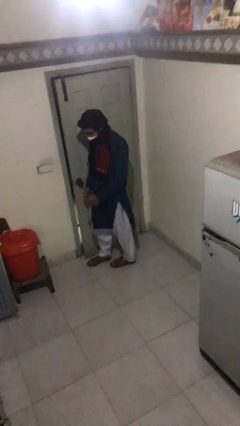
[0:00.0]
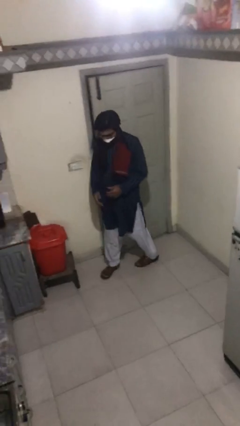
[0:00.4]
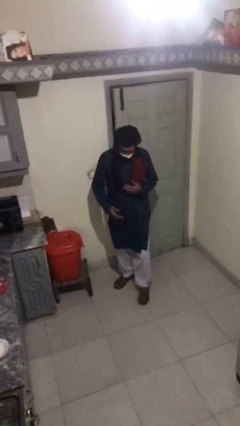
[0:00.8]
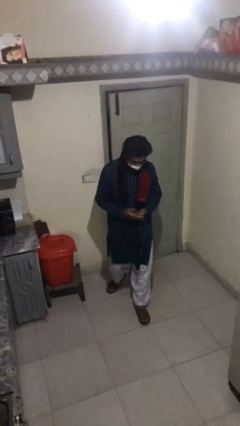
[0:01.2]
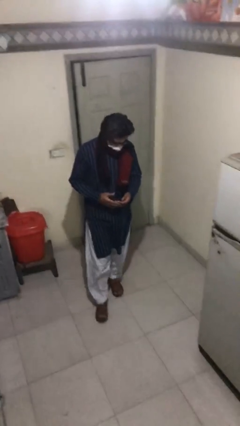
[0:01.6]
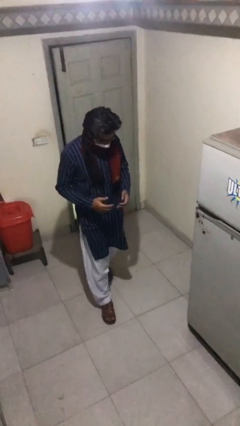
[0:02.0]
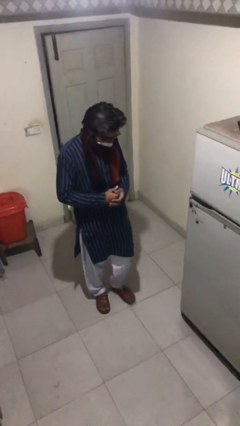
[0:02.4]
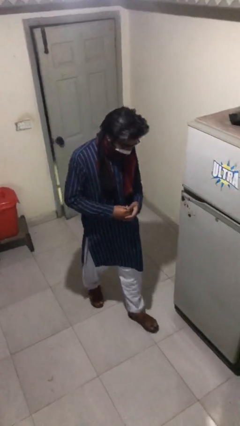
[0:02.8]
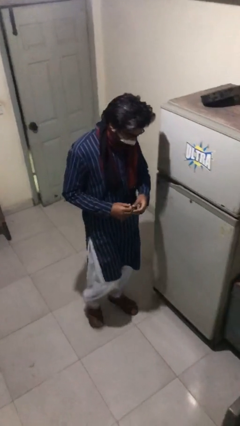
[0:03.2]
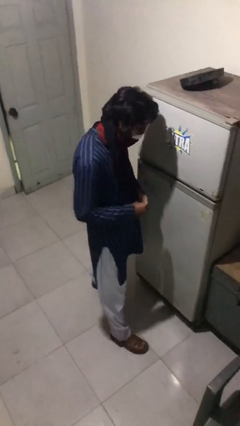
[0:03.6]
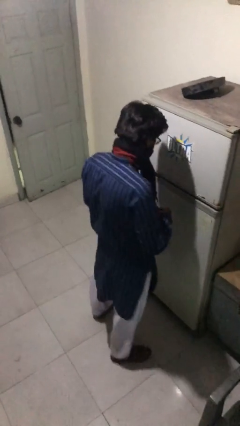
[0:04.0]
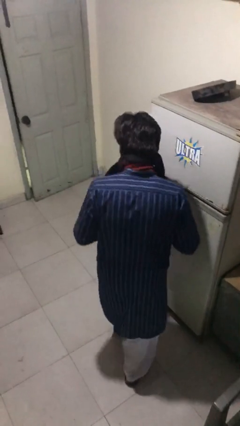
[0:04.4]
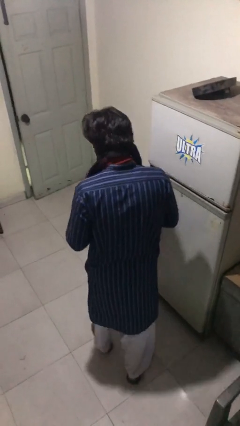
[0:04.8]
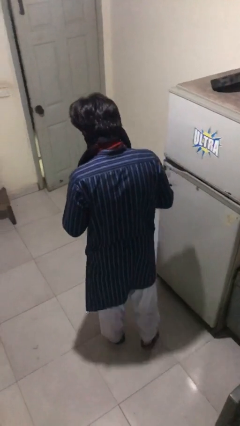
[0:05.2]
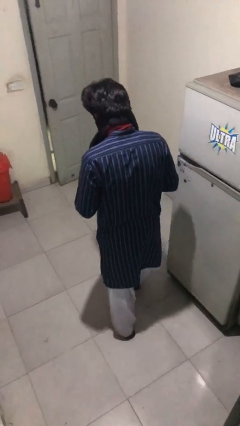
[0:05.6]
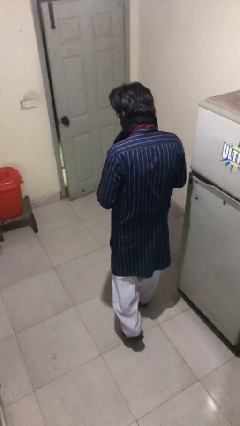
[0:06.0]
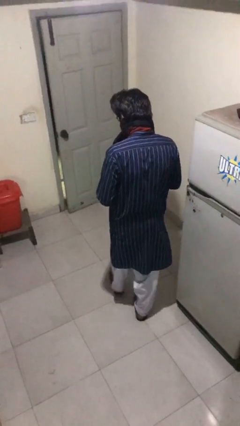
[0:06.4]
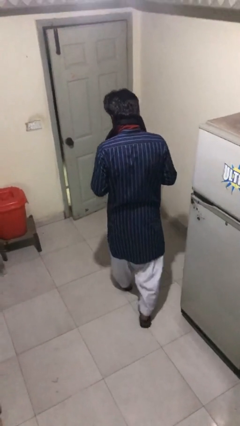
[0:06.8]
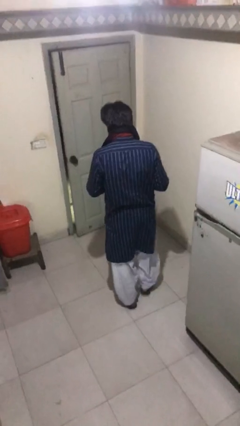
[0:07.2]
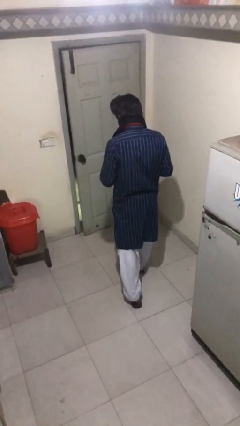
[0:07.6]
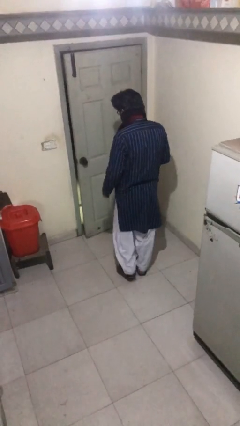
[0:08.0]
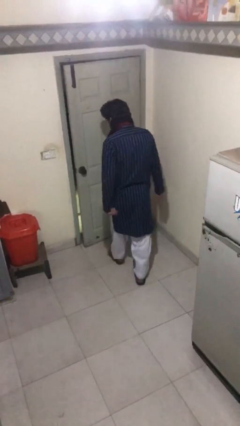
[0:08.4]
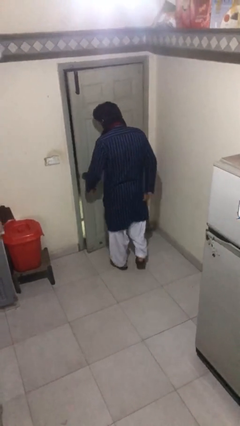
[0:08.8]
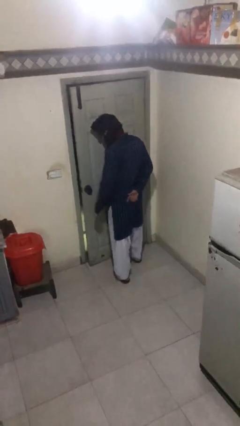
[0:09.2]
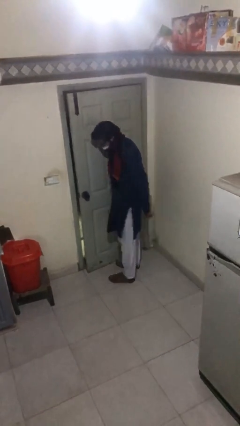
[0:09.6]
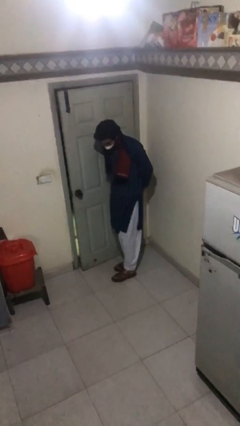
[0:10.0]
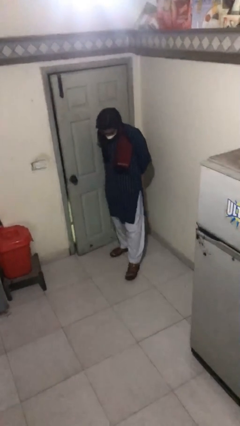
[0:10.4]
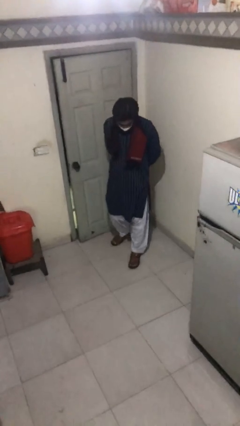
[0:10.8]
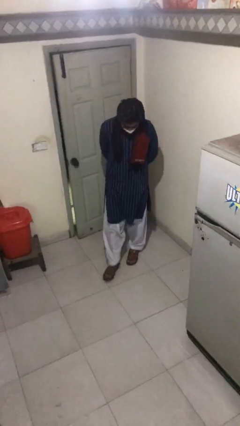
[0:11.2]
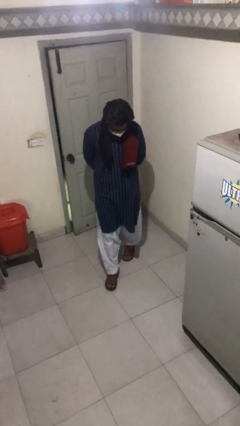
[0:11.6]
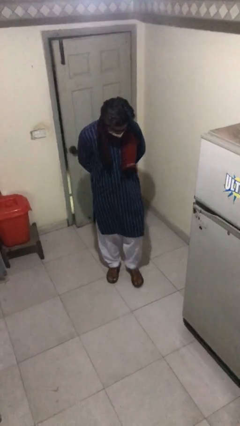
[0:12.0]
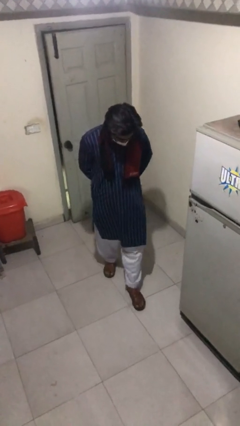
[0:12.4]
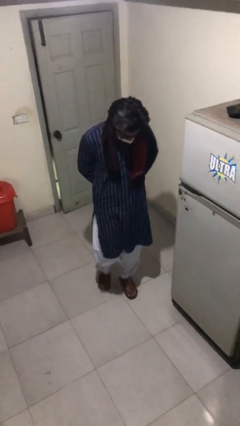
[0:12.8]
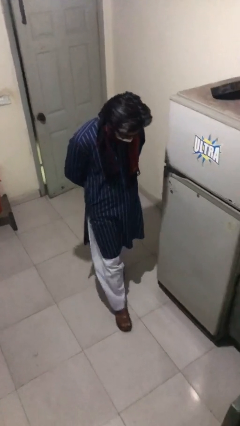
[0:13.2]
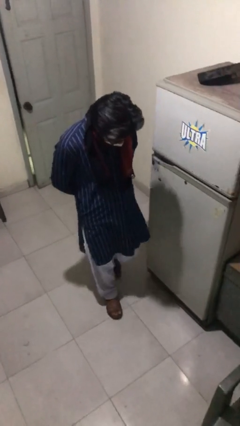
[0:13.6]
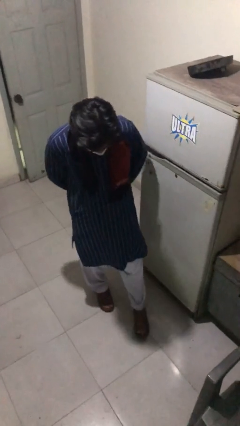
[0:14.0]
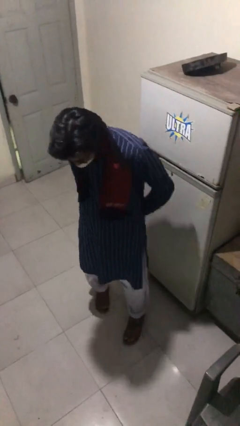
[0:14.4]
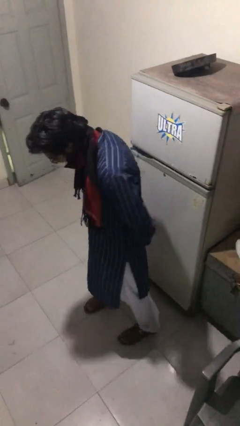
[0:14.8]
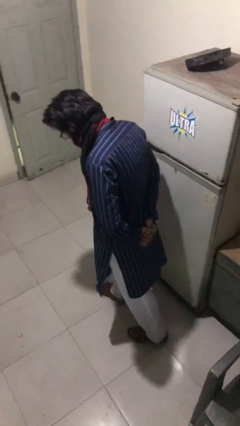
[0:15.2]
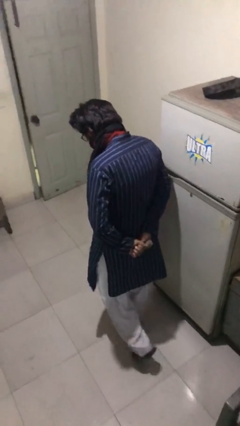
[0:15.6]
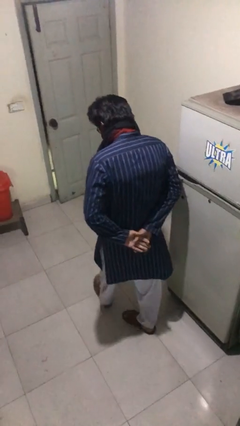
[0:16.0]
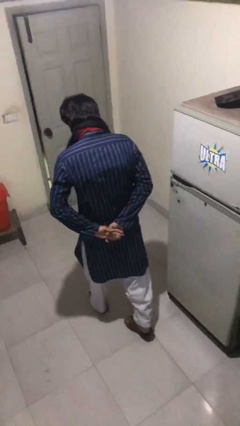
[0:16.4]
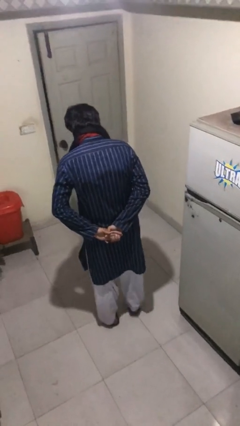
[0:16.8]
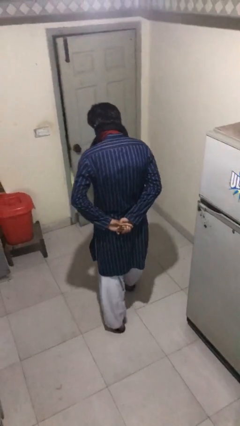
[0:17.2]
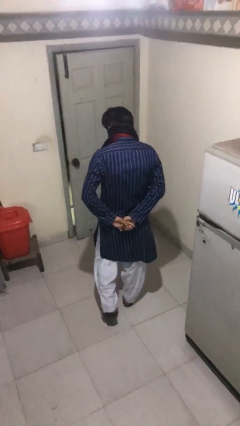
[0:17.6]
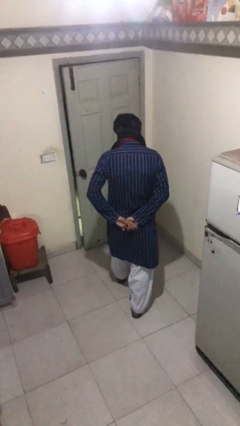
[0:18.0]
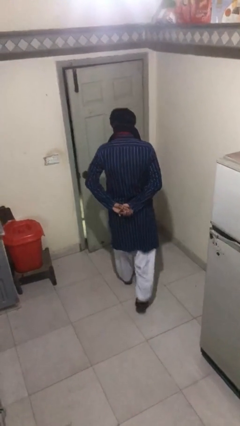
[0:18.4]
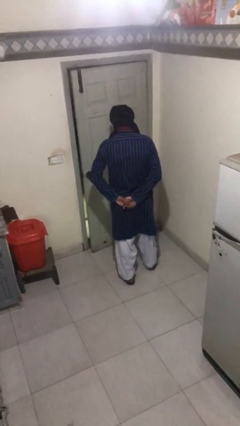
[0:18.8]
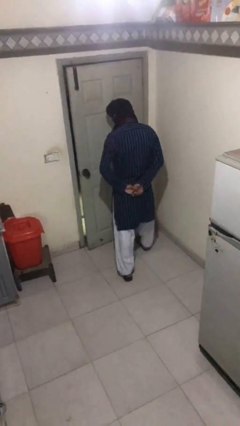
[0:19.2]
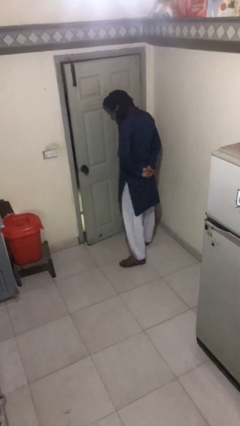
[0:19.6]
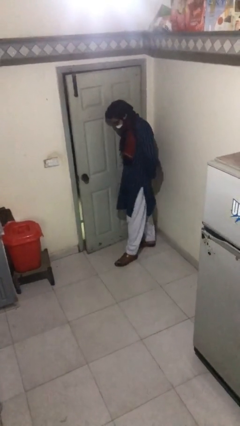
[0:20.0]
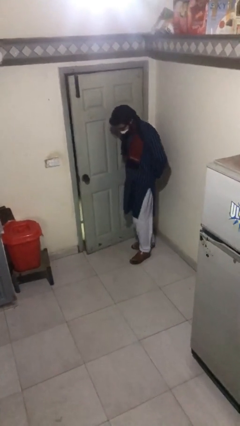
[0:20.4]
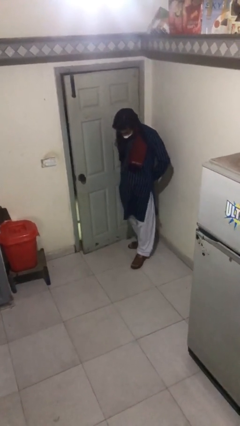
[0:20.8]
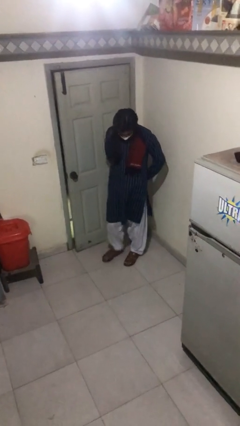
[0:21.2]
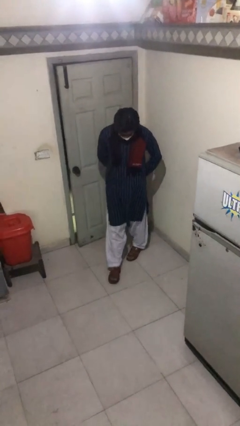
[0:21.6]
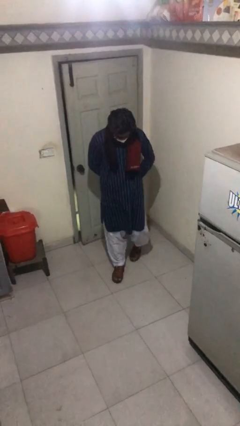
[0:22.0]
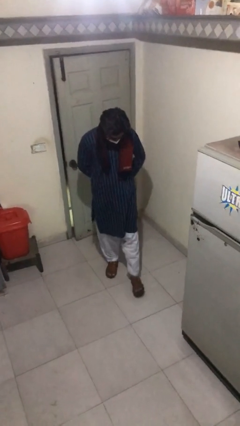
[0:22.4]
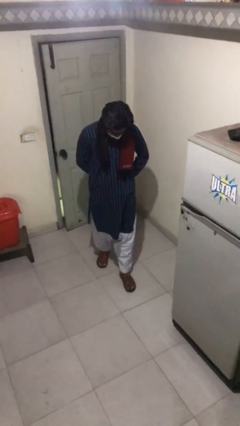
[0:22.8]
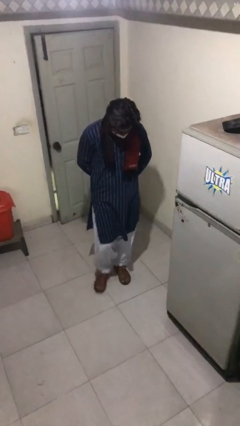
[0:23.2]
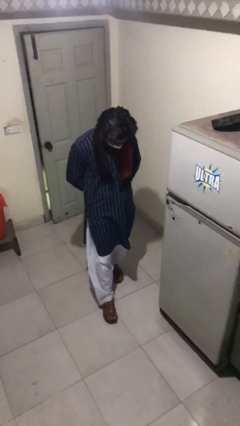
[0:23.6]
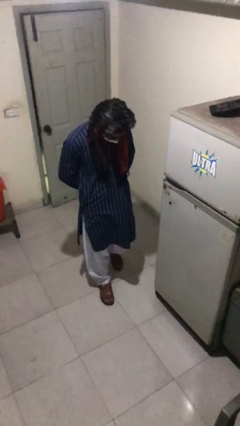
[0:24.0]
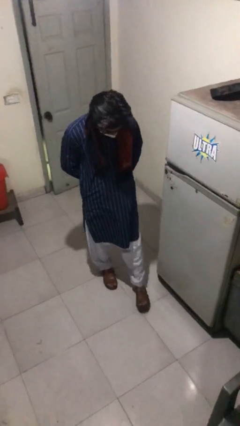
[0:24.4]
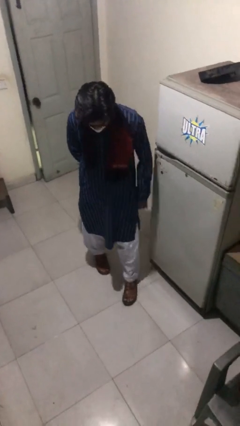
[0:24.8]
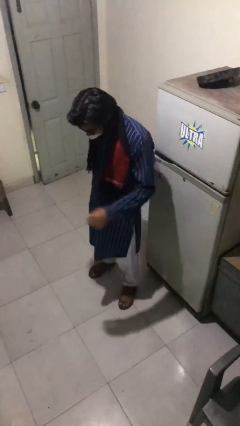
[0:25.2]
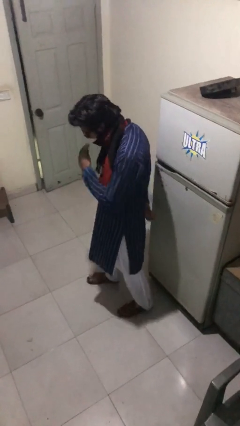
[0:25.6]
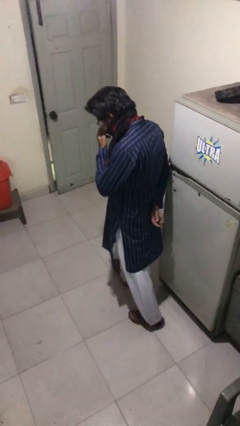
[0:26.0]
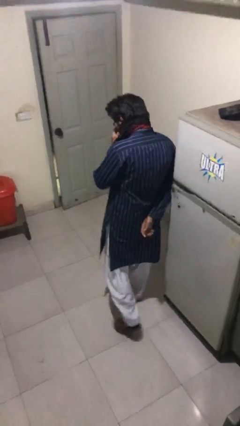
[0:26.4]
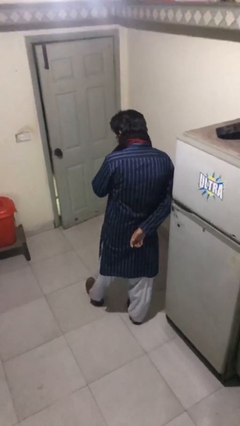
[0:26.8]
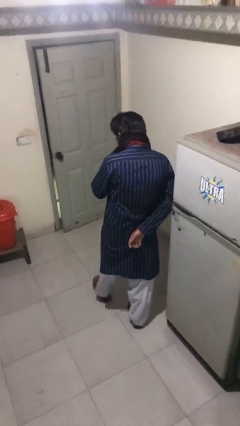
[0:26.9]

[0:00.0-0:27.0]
person walks

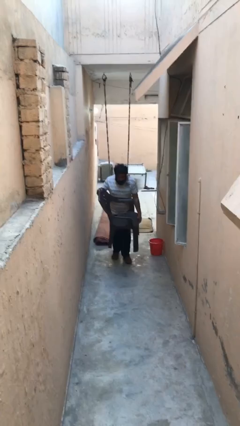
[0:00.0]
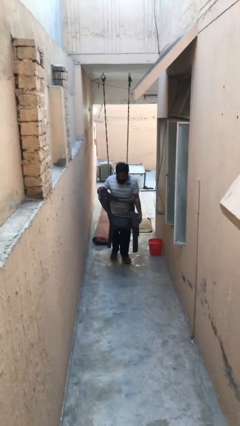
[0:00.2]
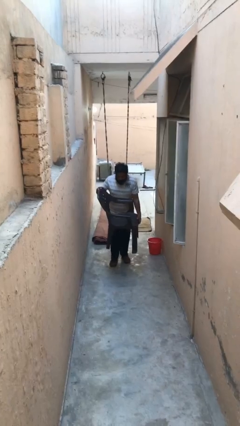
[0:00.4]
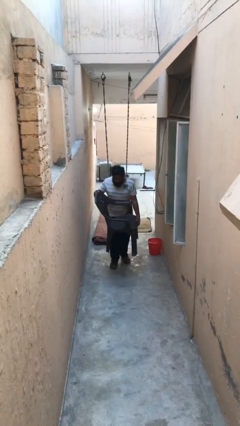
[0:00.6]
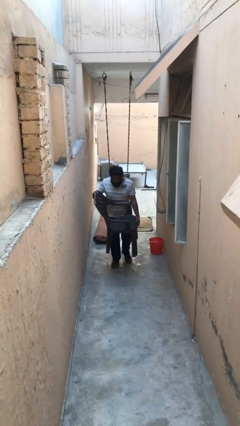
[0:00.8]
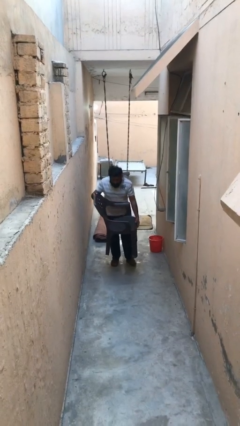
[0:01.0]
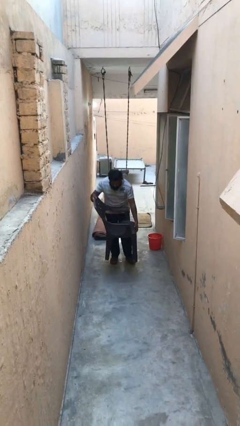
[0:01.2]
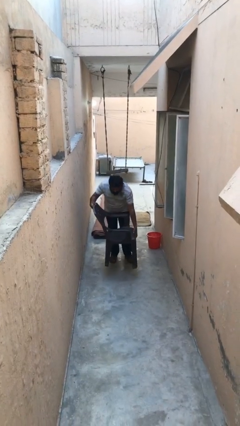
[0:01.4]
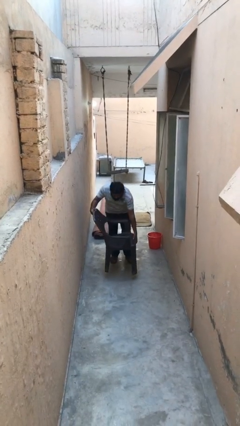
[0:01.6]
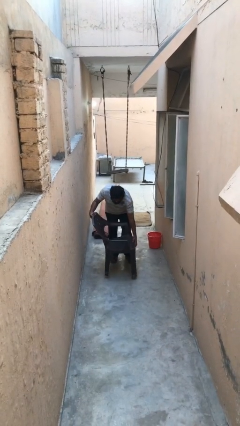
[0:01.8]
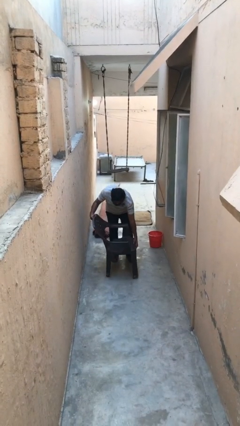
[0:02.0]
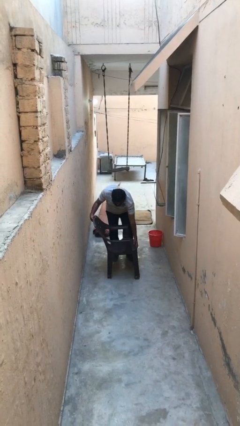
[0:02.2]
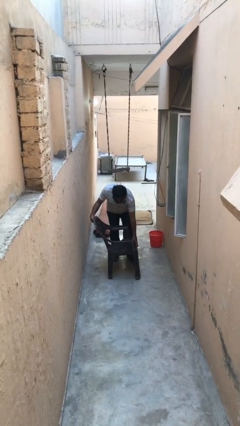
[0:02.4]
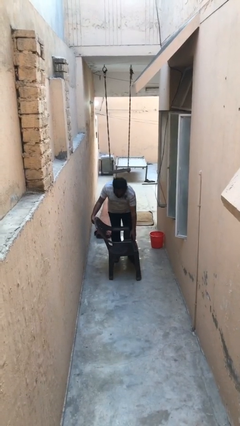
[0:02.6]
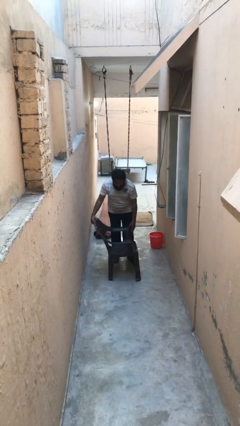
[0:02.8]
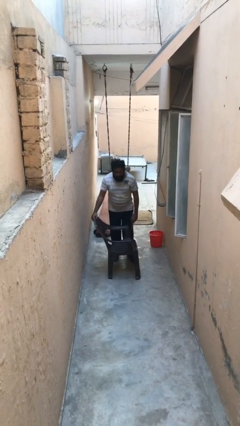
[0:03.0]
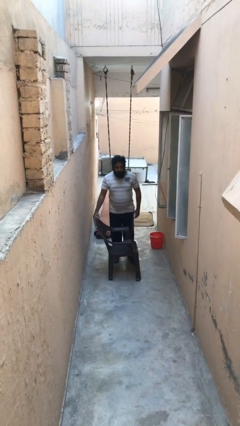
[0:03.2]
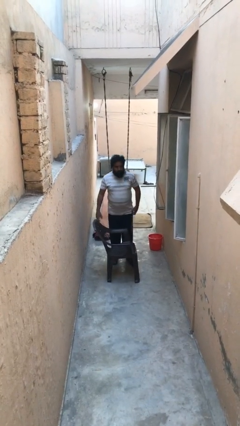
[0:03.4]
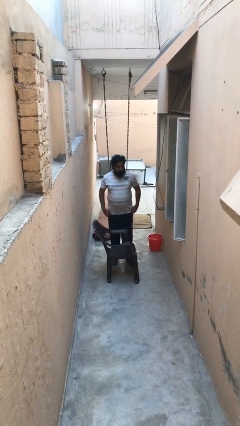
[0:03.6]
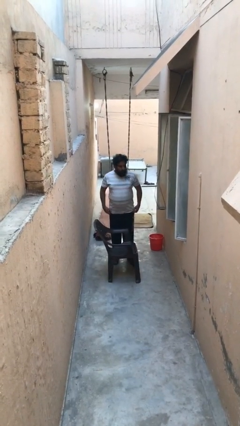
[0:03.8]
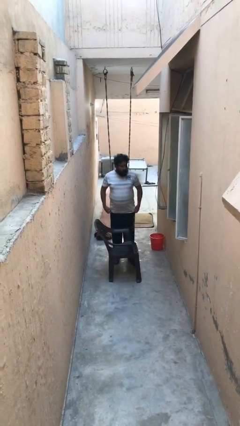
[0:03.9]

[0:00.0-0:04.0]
person puts down object on floor
